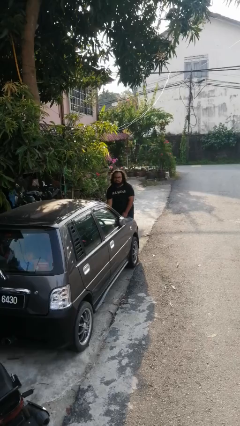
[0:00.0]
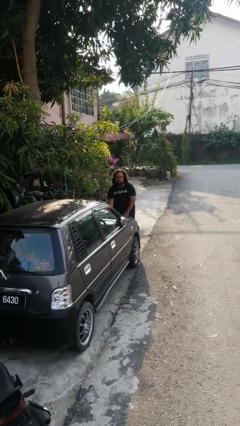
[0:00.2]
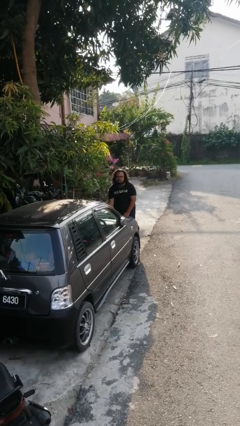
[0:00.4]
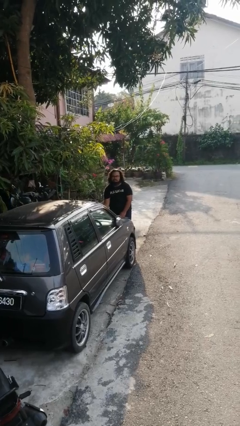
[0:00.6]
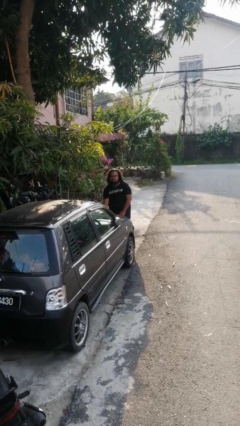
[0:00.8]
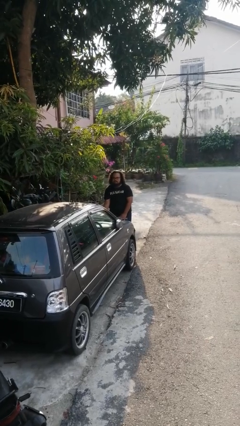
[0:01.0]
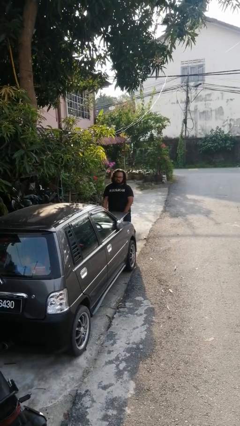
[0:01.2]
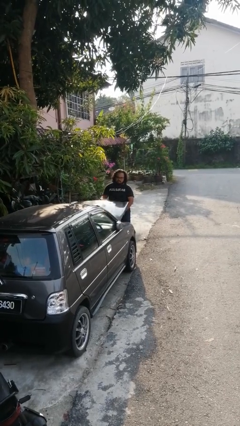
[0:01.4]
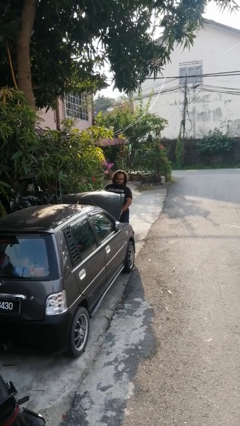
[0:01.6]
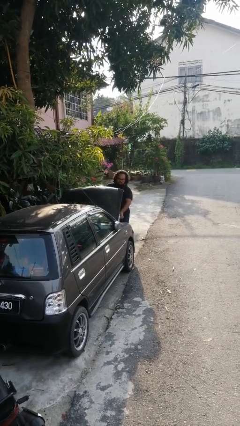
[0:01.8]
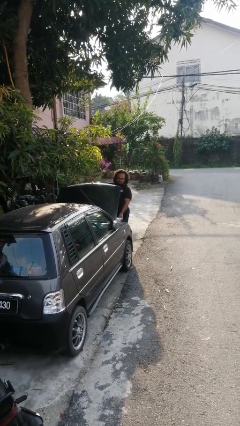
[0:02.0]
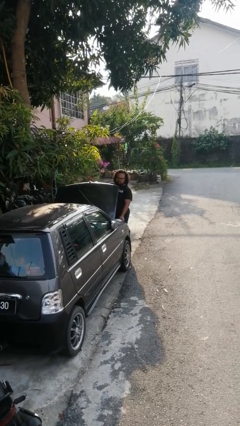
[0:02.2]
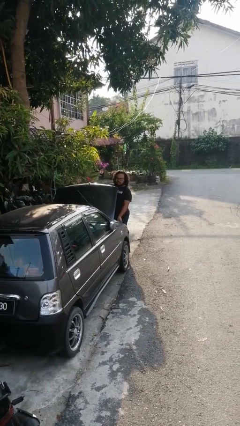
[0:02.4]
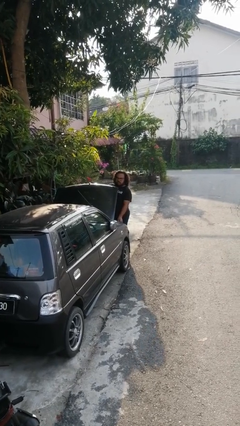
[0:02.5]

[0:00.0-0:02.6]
person opens car hood

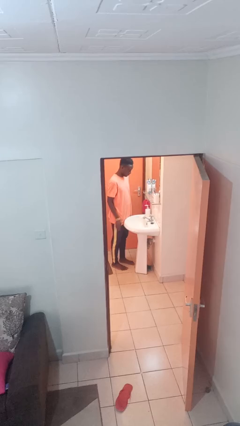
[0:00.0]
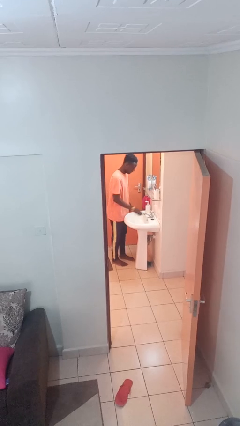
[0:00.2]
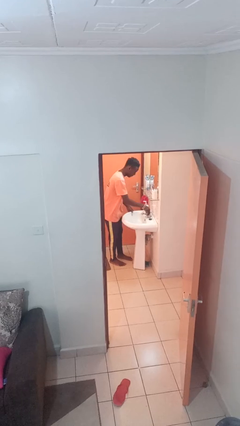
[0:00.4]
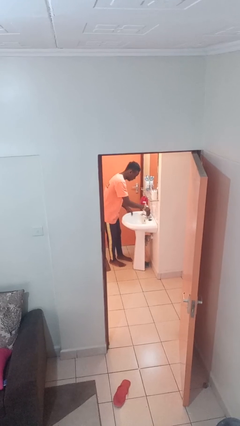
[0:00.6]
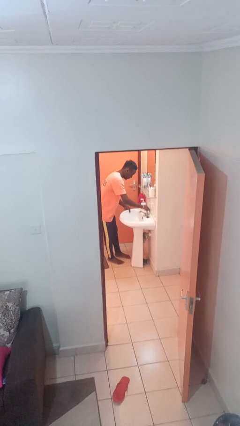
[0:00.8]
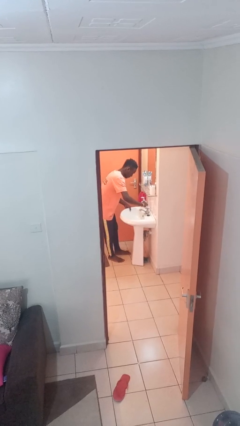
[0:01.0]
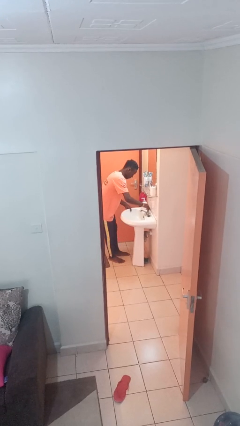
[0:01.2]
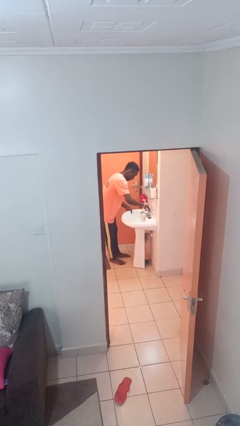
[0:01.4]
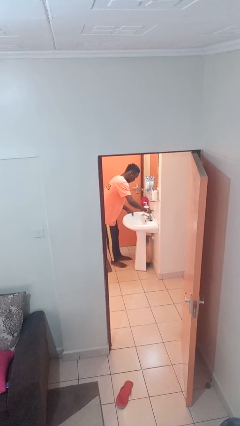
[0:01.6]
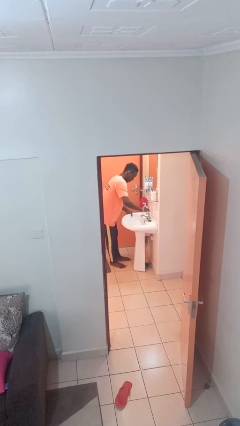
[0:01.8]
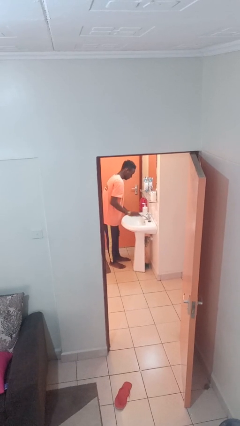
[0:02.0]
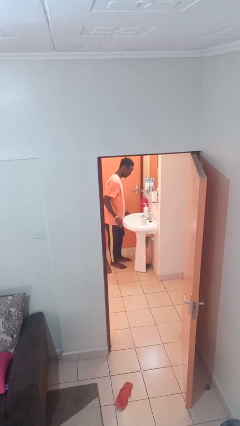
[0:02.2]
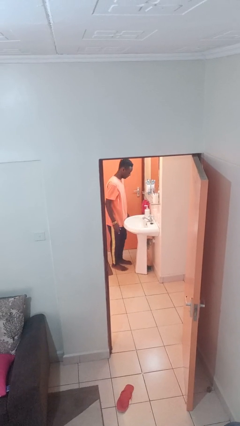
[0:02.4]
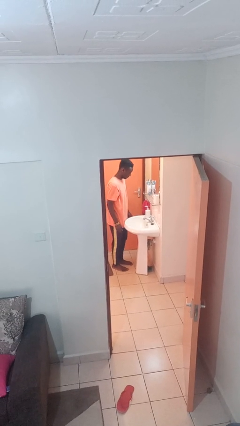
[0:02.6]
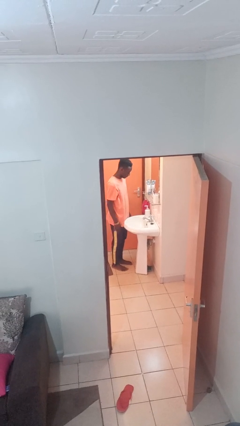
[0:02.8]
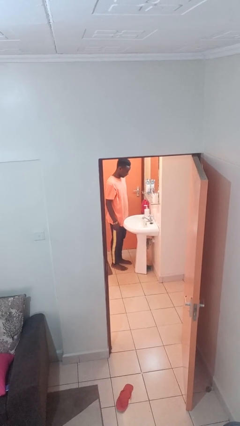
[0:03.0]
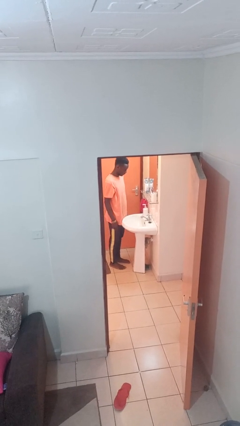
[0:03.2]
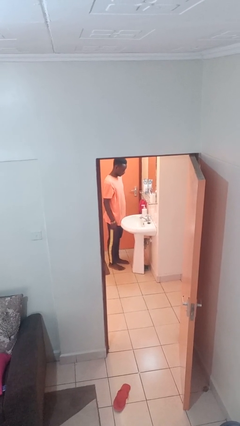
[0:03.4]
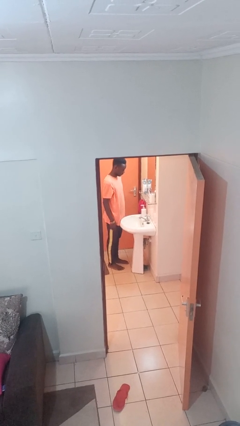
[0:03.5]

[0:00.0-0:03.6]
person turns on faucet

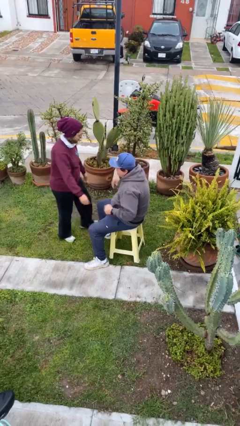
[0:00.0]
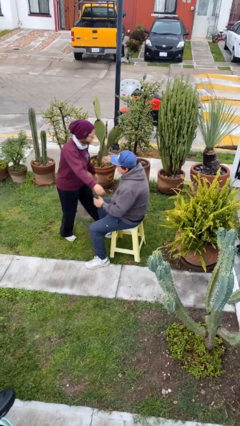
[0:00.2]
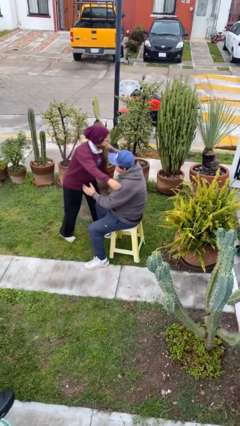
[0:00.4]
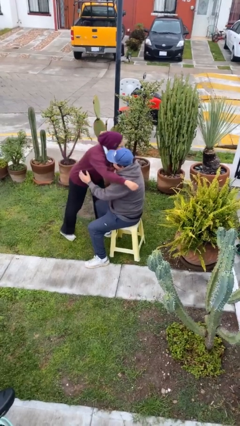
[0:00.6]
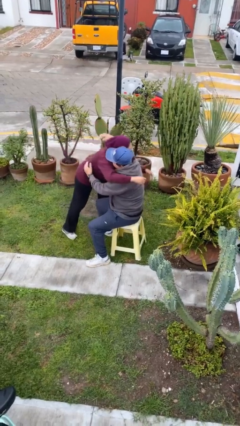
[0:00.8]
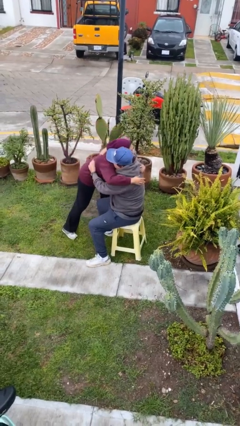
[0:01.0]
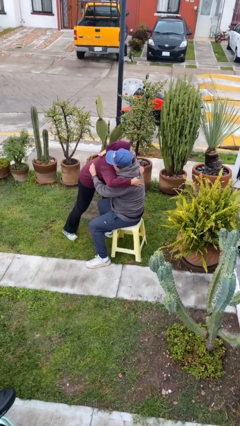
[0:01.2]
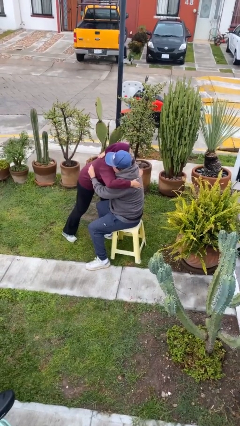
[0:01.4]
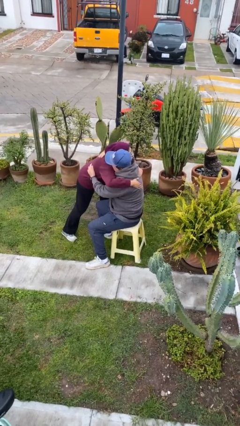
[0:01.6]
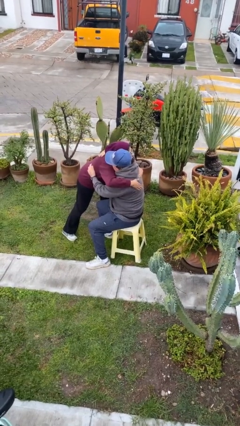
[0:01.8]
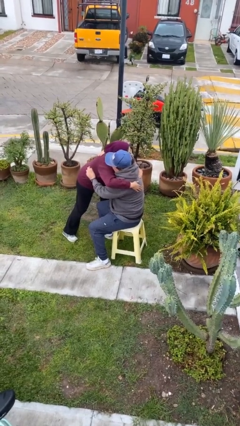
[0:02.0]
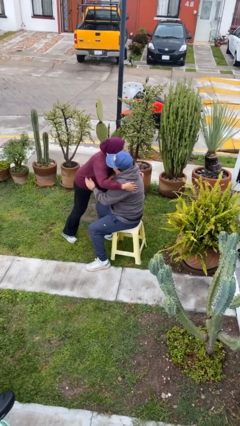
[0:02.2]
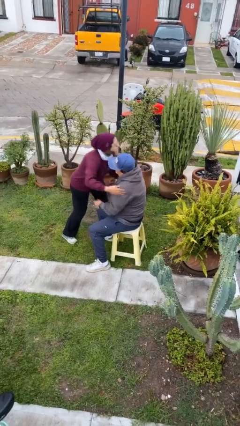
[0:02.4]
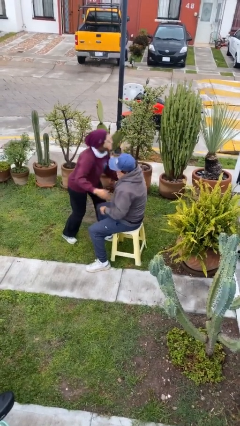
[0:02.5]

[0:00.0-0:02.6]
person embraces person

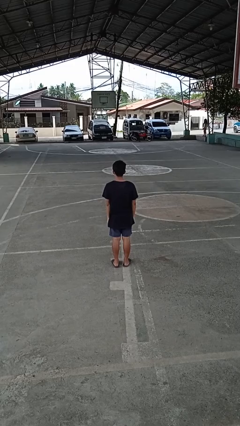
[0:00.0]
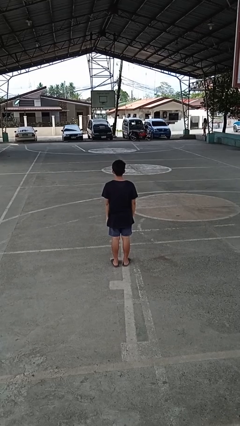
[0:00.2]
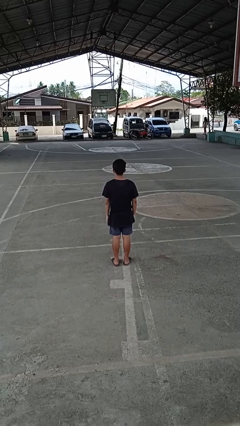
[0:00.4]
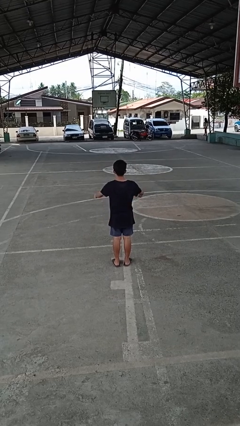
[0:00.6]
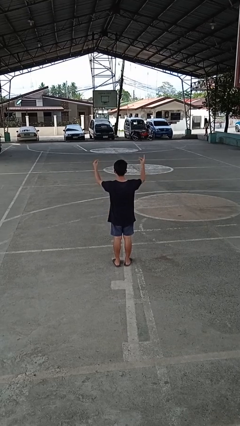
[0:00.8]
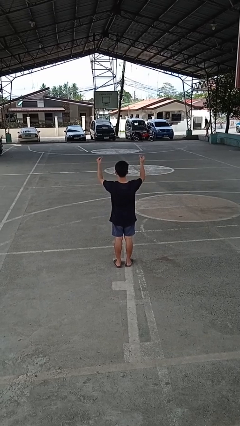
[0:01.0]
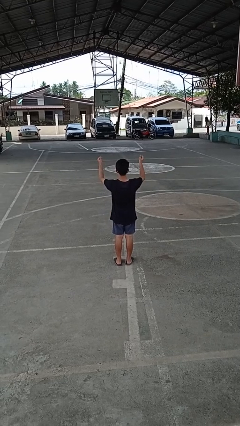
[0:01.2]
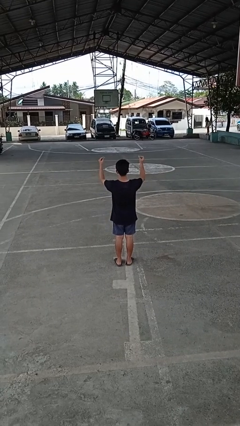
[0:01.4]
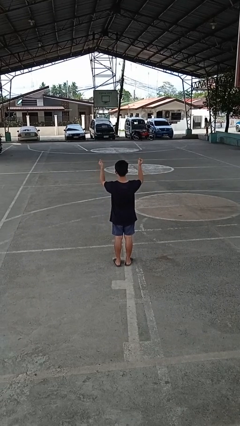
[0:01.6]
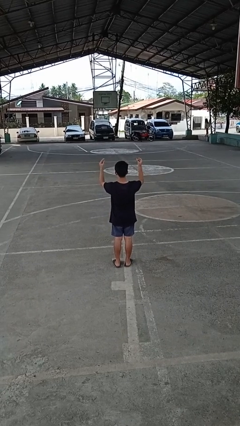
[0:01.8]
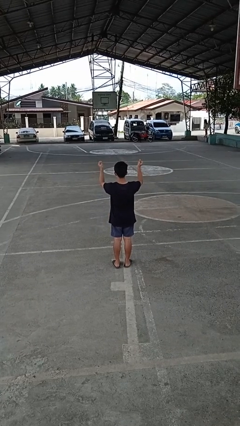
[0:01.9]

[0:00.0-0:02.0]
person snaps fingers

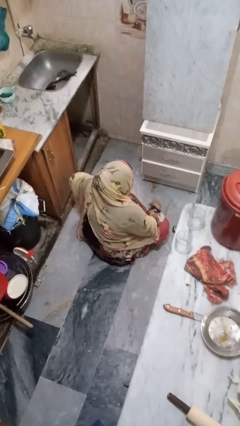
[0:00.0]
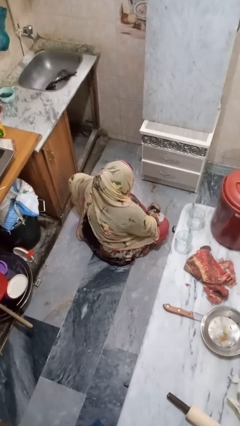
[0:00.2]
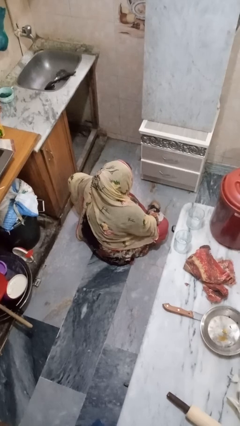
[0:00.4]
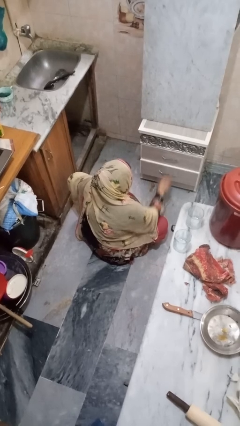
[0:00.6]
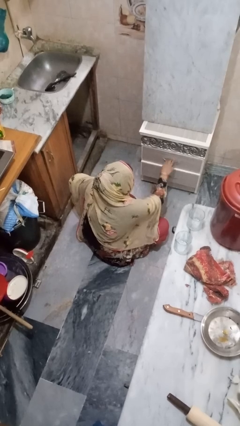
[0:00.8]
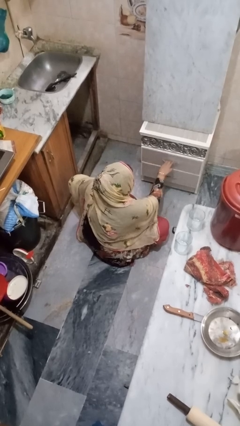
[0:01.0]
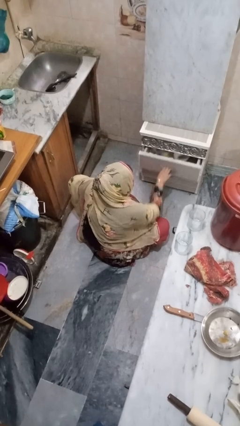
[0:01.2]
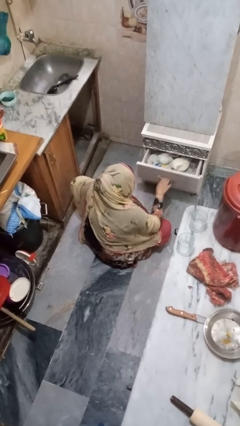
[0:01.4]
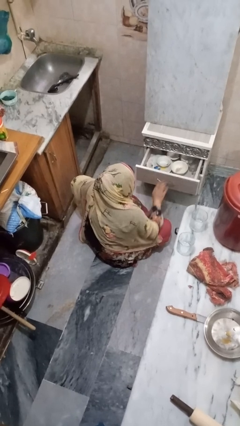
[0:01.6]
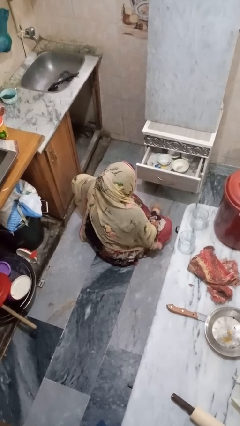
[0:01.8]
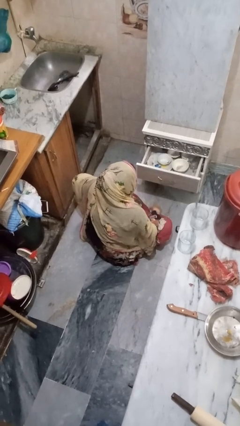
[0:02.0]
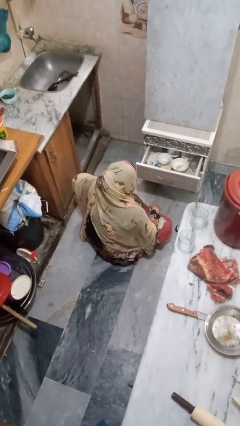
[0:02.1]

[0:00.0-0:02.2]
person opens kitchen drawer

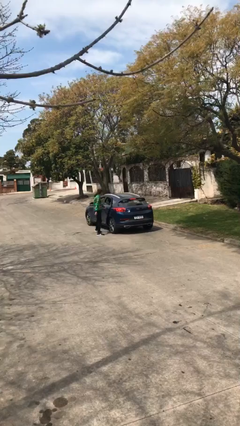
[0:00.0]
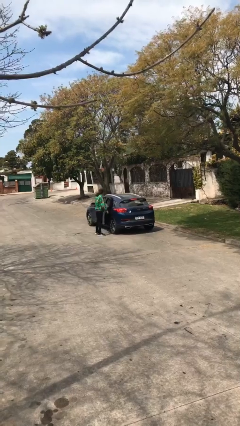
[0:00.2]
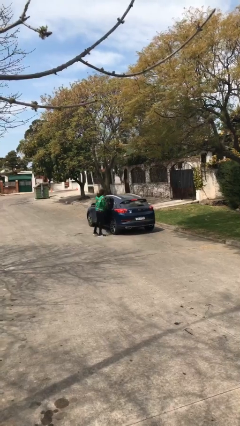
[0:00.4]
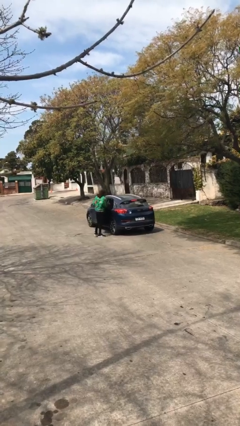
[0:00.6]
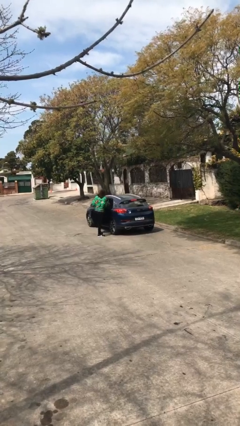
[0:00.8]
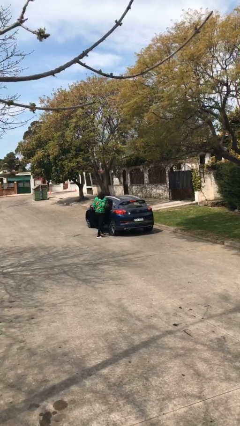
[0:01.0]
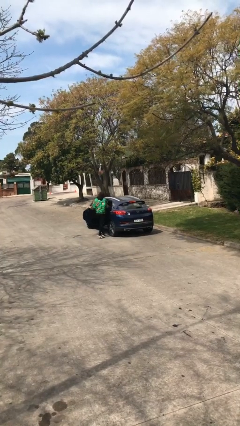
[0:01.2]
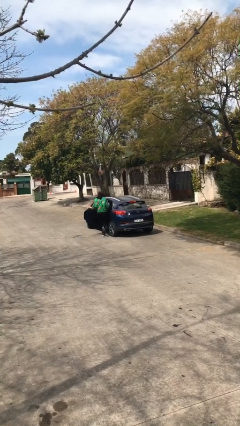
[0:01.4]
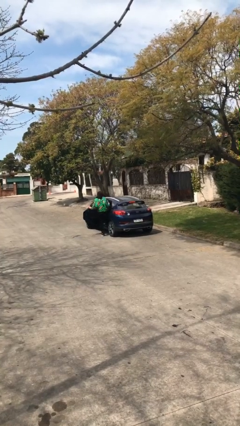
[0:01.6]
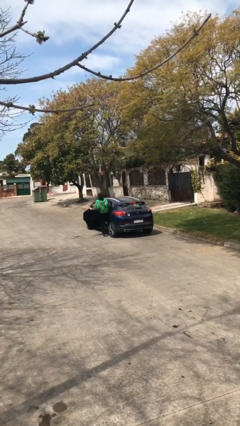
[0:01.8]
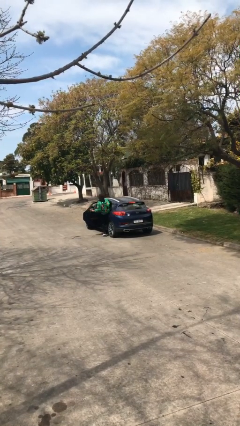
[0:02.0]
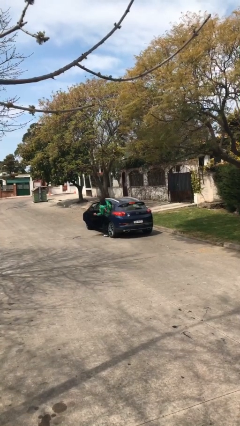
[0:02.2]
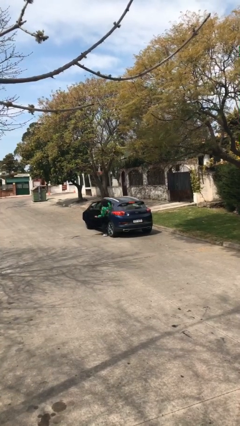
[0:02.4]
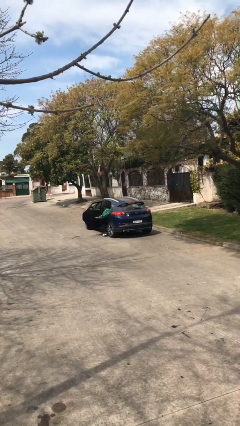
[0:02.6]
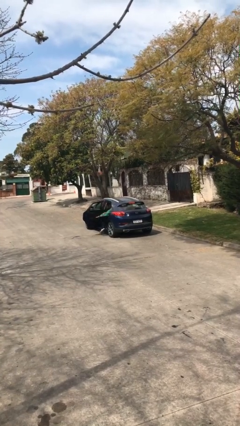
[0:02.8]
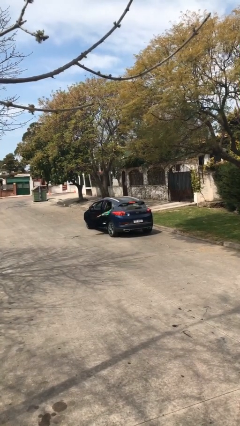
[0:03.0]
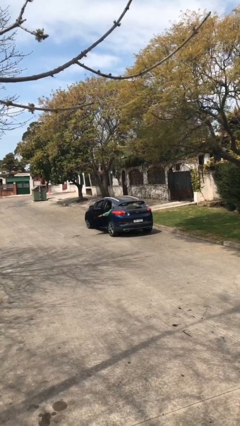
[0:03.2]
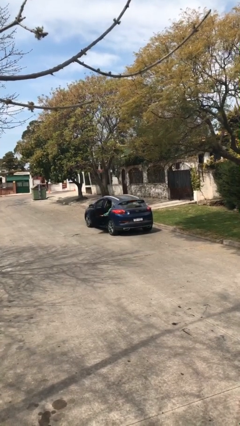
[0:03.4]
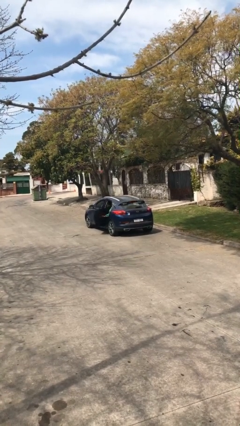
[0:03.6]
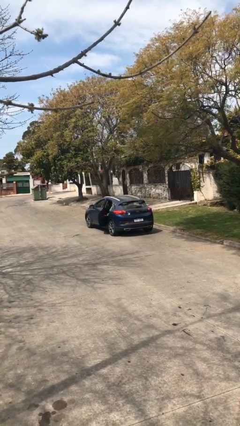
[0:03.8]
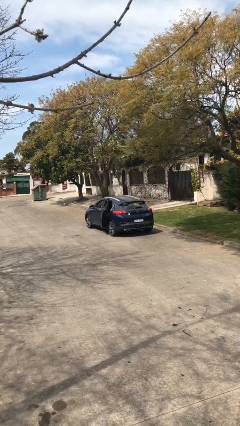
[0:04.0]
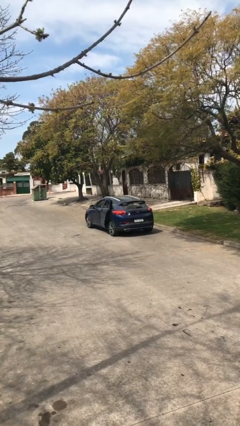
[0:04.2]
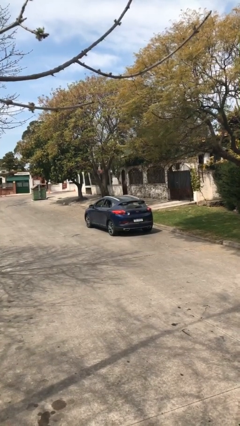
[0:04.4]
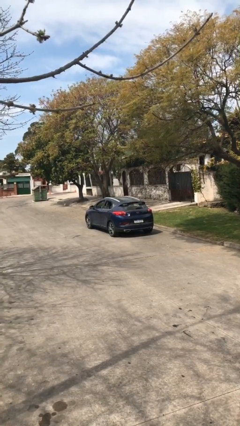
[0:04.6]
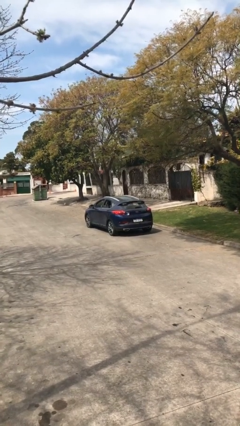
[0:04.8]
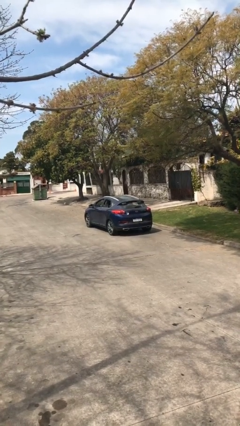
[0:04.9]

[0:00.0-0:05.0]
car picks up person
